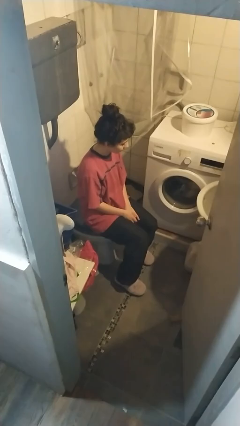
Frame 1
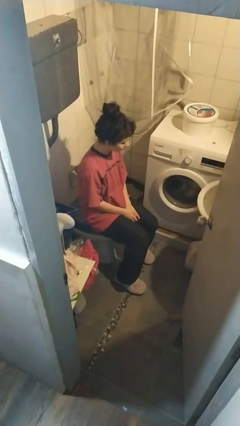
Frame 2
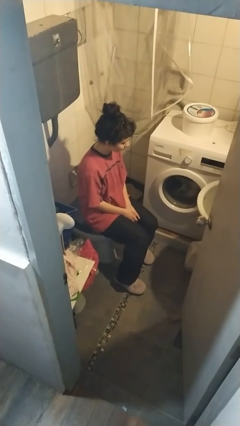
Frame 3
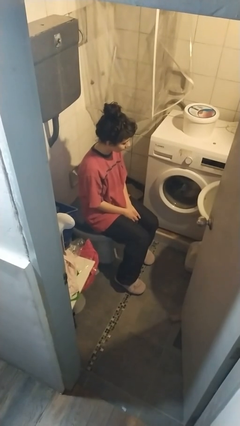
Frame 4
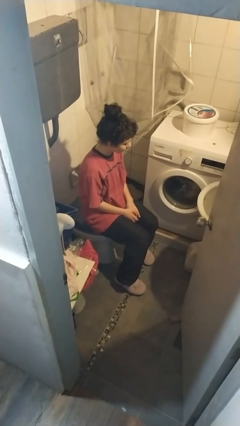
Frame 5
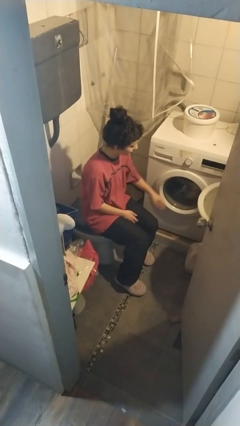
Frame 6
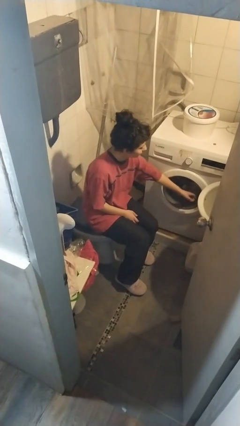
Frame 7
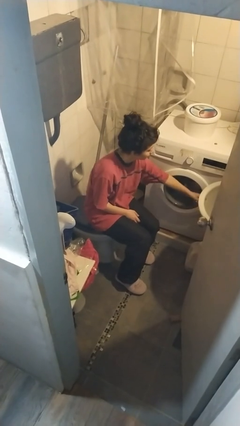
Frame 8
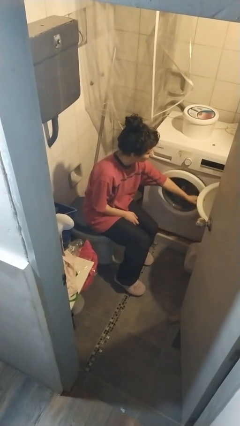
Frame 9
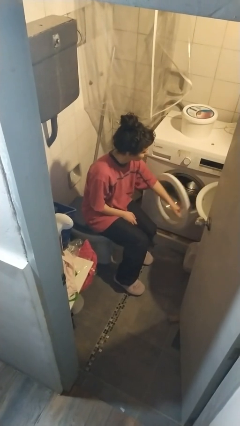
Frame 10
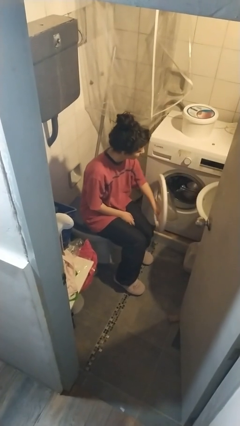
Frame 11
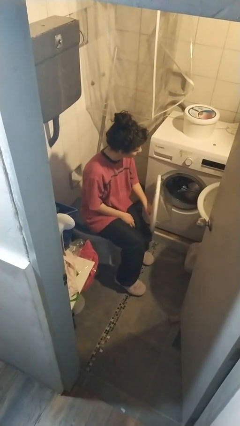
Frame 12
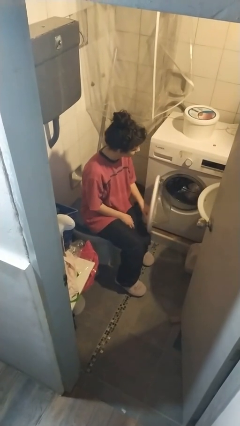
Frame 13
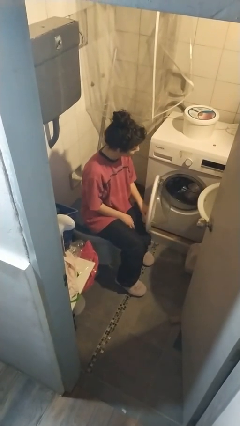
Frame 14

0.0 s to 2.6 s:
person opens clothes washer

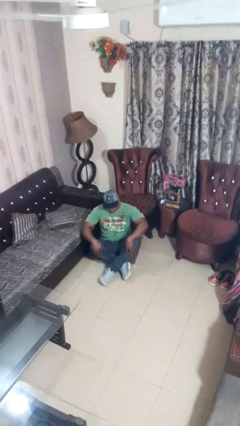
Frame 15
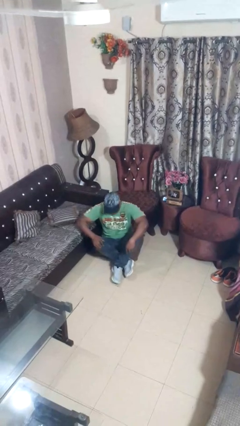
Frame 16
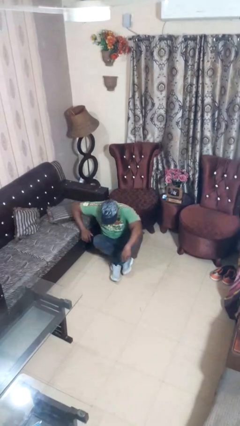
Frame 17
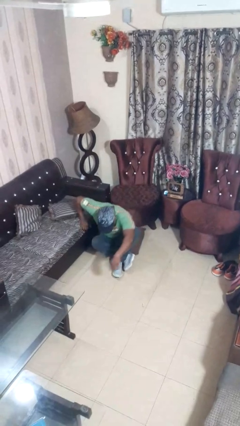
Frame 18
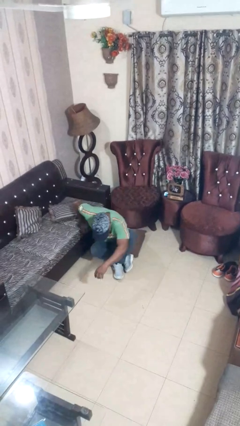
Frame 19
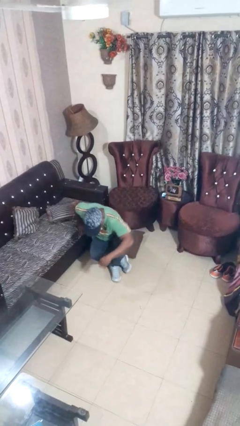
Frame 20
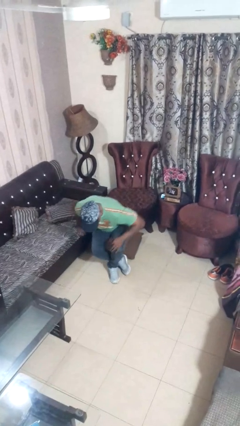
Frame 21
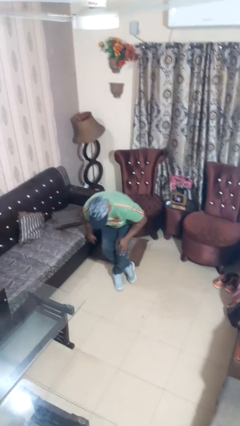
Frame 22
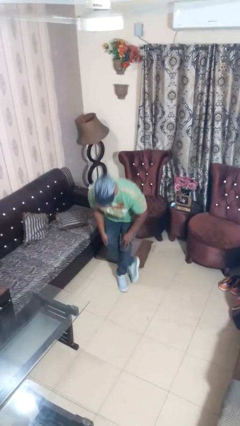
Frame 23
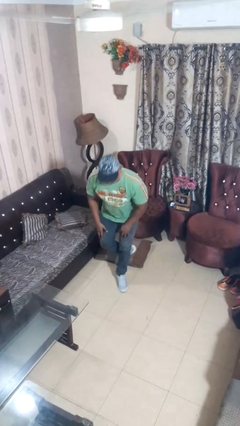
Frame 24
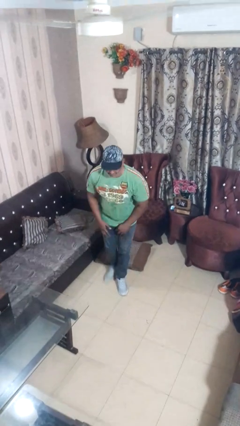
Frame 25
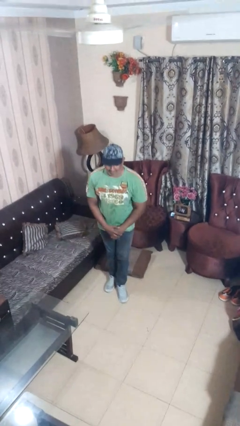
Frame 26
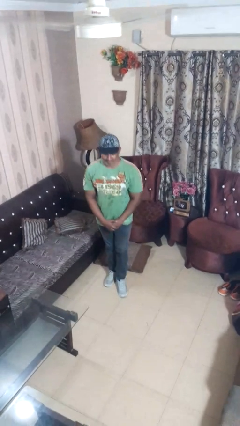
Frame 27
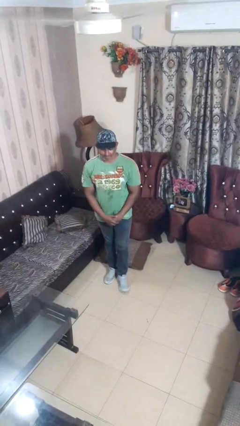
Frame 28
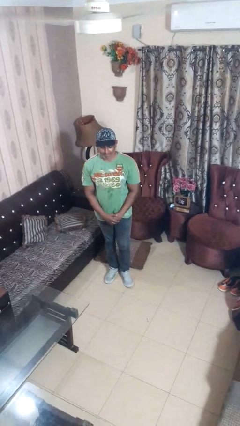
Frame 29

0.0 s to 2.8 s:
person stands up from floor

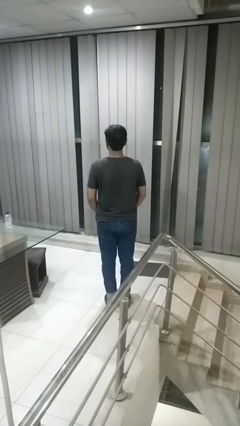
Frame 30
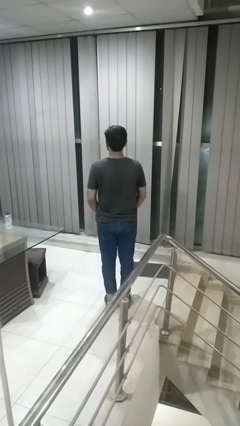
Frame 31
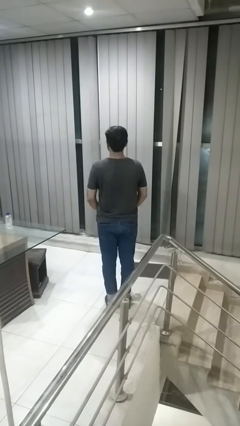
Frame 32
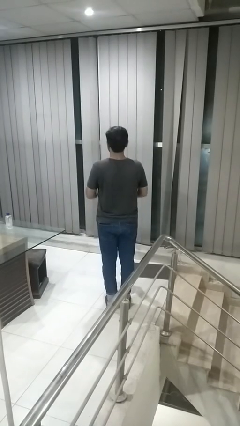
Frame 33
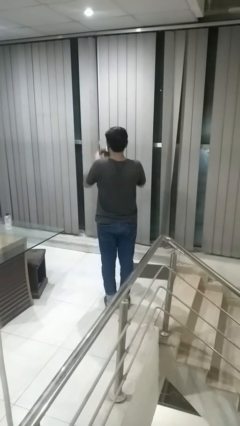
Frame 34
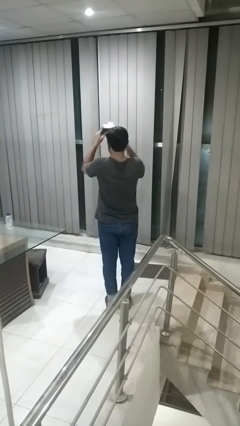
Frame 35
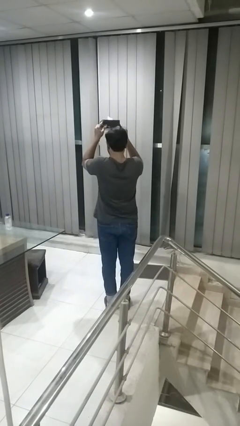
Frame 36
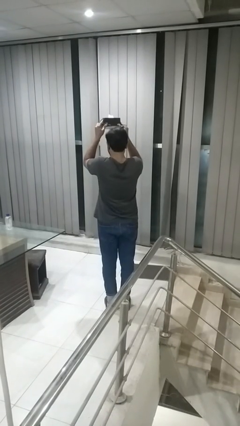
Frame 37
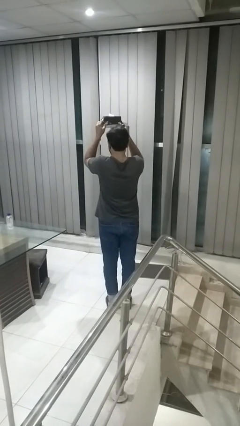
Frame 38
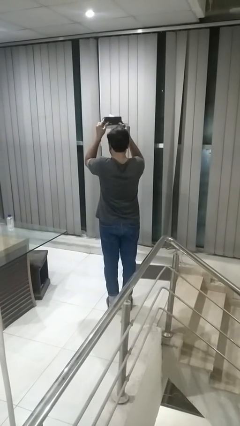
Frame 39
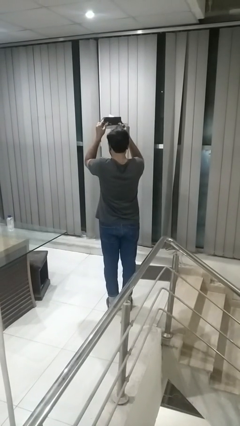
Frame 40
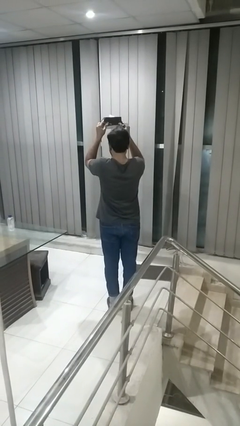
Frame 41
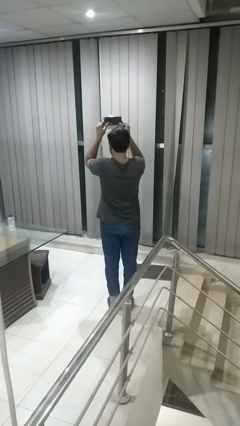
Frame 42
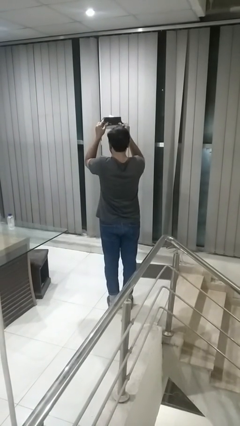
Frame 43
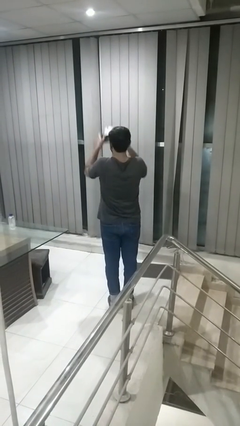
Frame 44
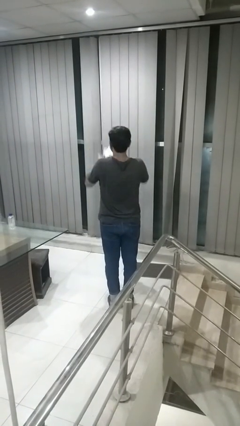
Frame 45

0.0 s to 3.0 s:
person holds object above head

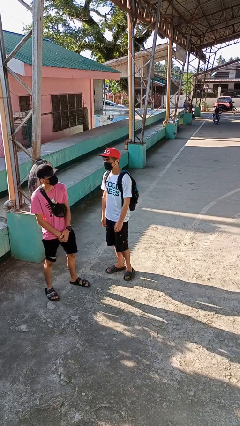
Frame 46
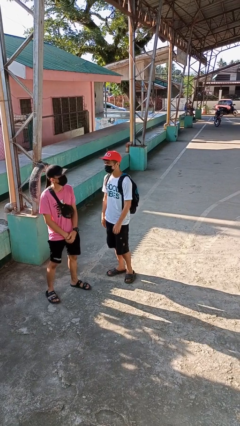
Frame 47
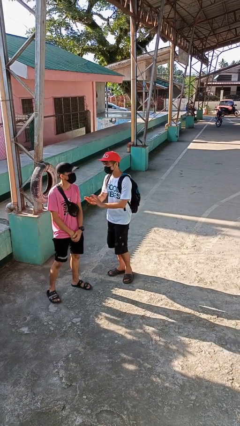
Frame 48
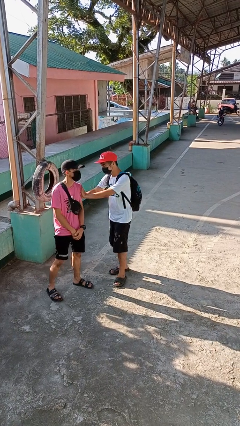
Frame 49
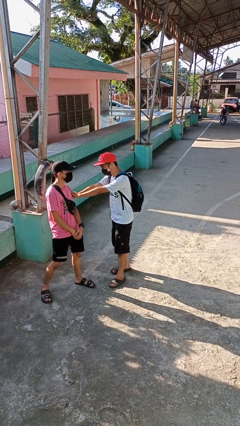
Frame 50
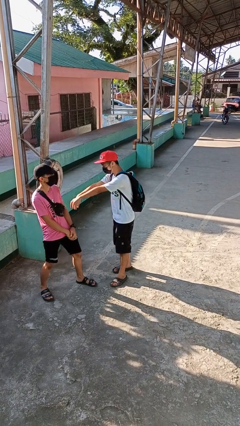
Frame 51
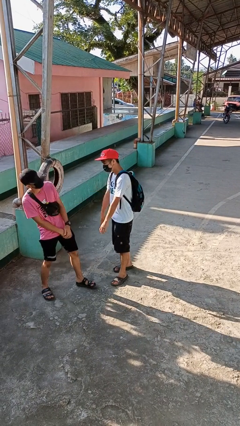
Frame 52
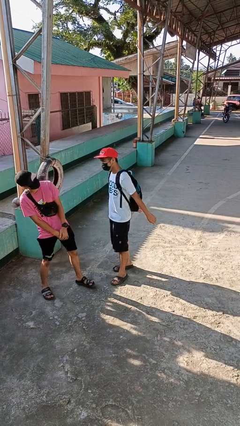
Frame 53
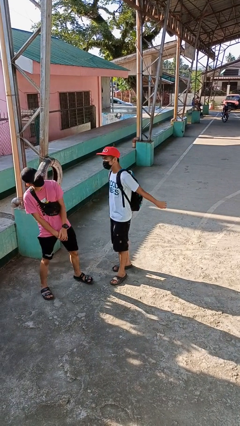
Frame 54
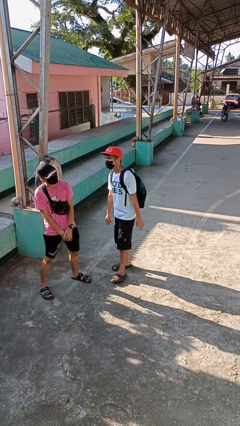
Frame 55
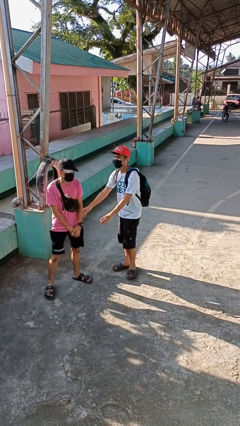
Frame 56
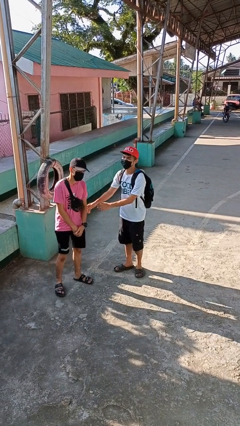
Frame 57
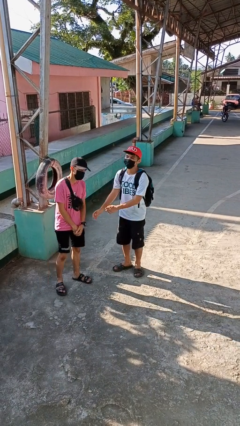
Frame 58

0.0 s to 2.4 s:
person shoves person

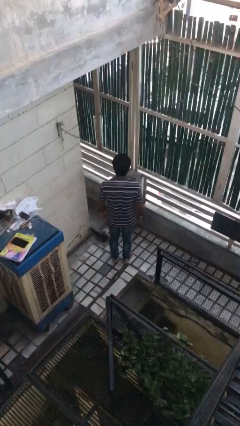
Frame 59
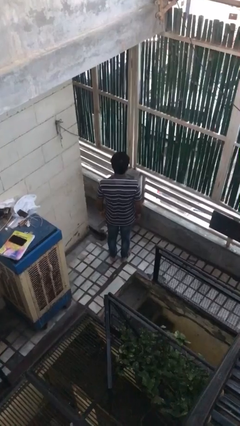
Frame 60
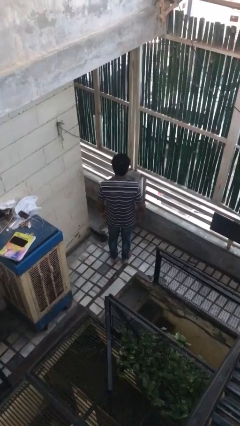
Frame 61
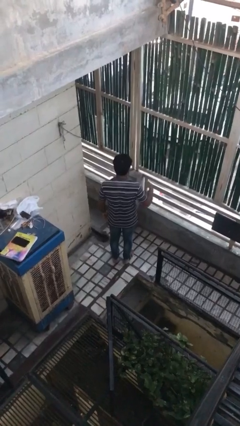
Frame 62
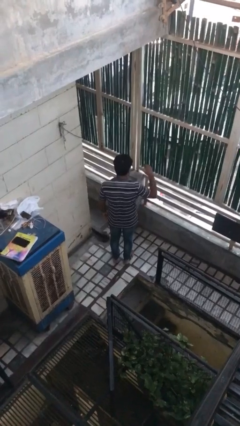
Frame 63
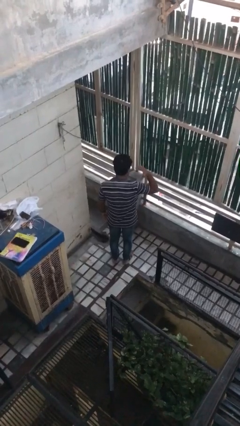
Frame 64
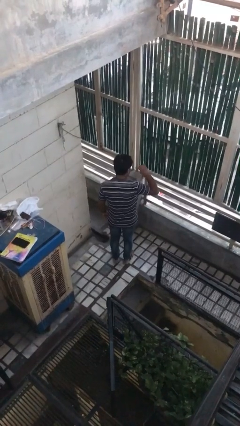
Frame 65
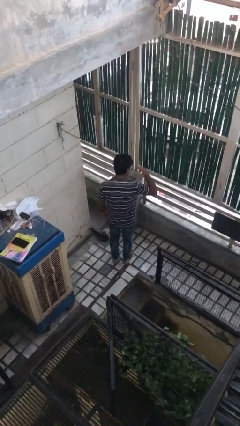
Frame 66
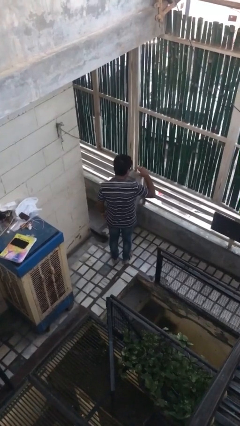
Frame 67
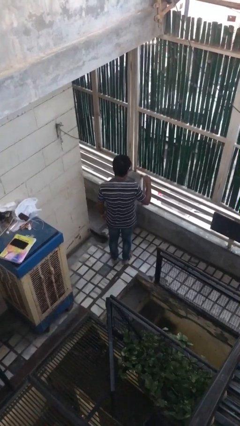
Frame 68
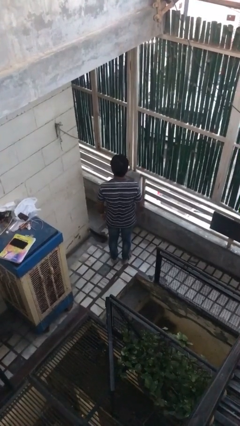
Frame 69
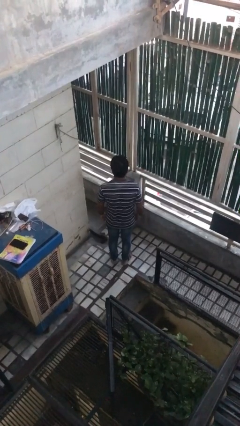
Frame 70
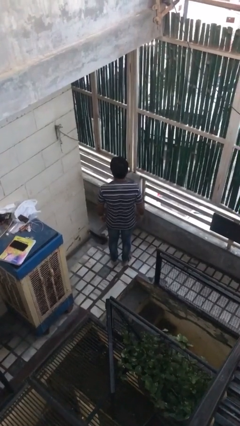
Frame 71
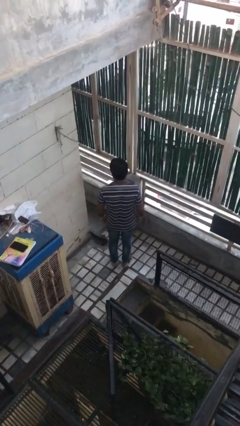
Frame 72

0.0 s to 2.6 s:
person gestures behind me

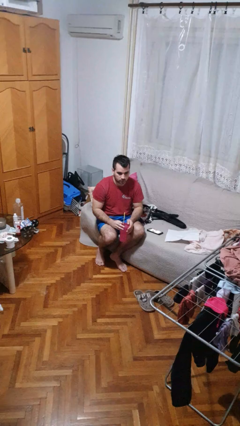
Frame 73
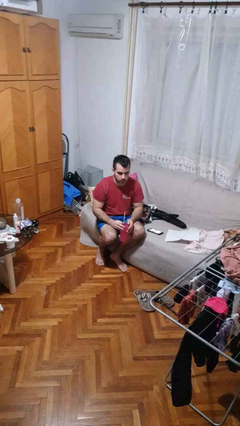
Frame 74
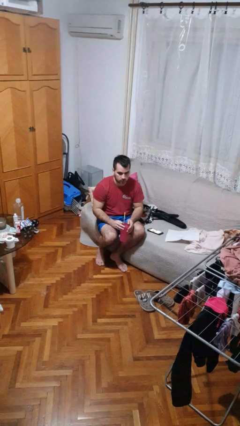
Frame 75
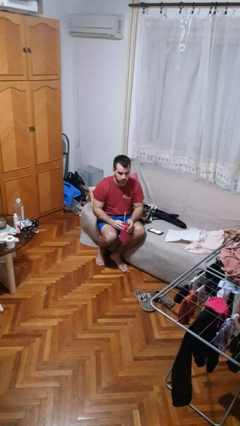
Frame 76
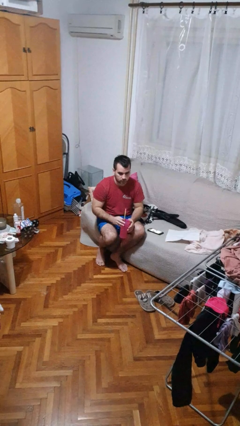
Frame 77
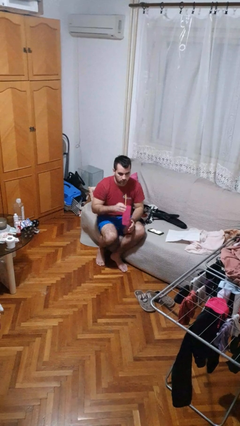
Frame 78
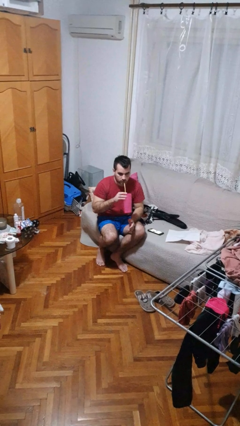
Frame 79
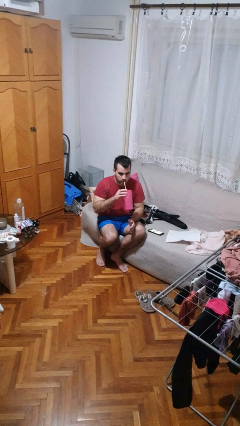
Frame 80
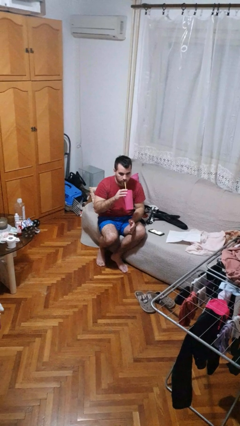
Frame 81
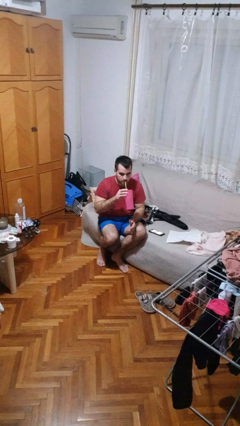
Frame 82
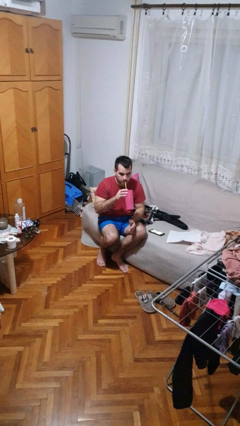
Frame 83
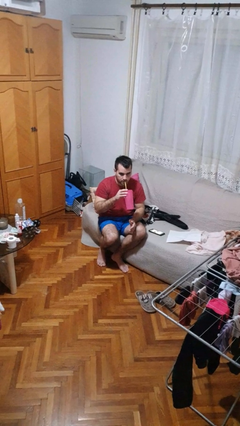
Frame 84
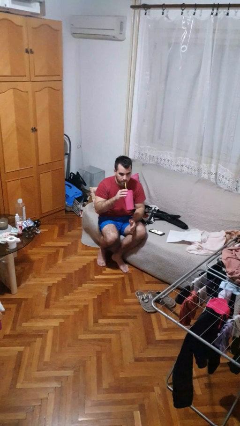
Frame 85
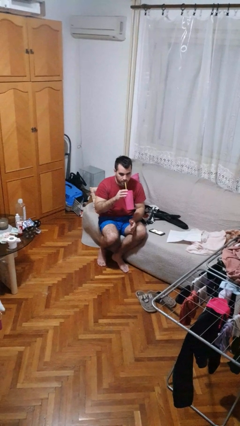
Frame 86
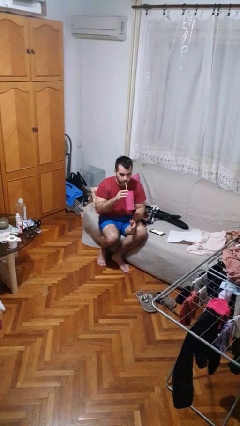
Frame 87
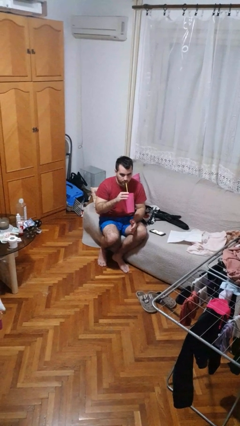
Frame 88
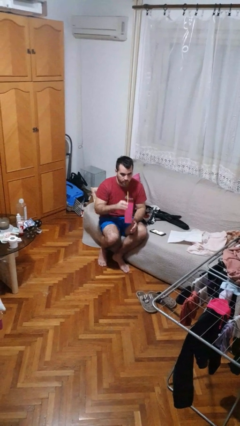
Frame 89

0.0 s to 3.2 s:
person drinks from straw

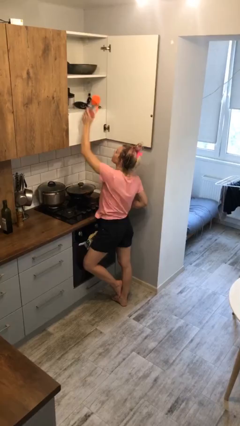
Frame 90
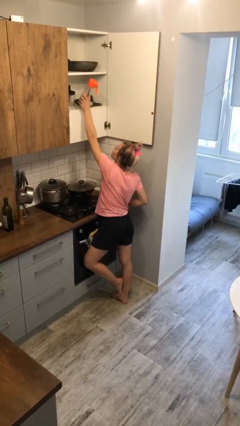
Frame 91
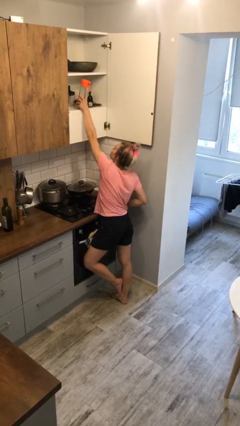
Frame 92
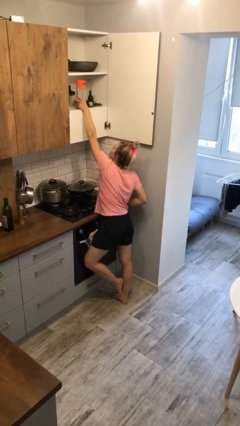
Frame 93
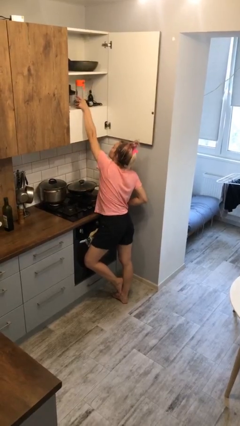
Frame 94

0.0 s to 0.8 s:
person puts down object into cabinet
